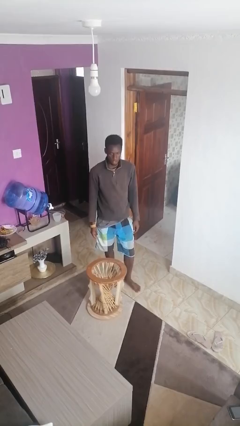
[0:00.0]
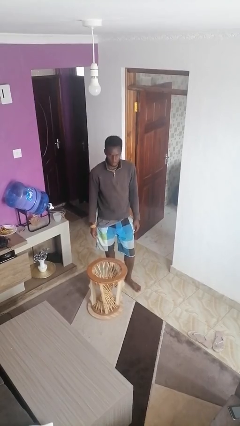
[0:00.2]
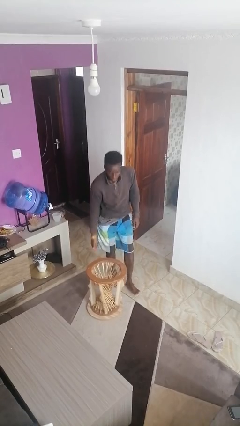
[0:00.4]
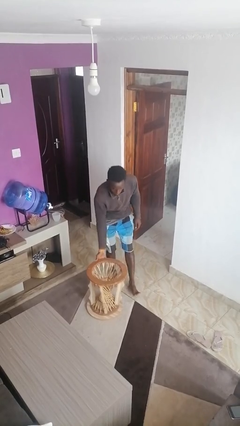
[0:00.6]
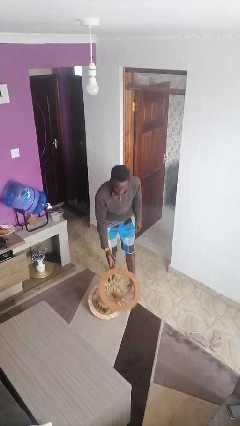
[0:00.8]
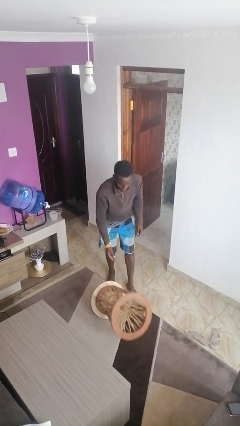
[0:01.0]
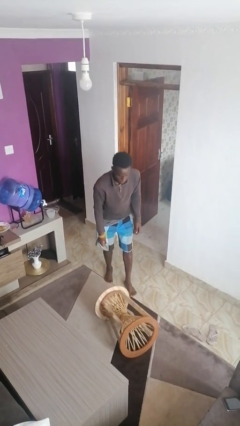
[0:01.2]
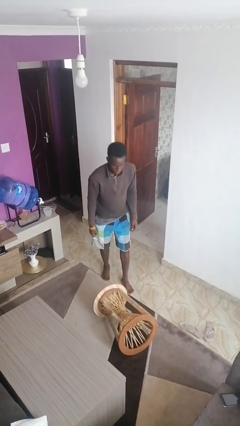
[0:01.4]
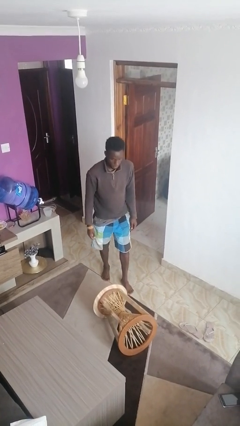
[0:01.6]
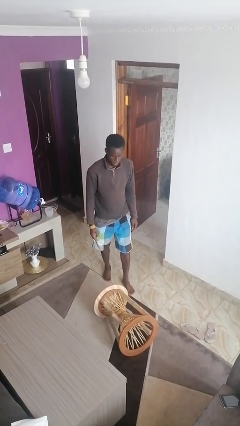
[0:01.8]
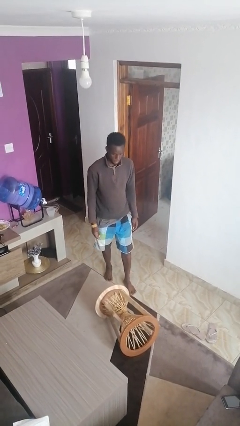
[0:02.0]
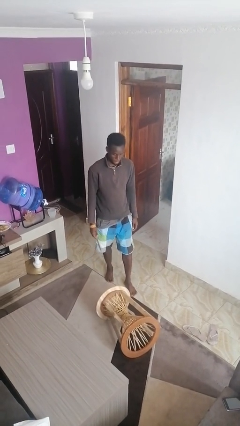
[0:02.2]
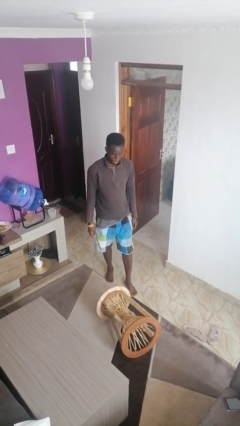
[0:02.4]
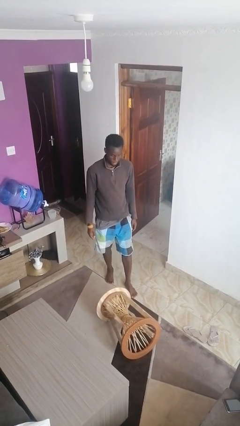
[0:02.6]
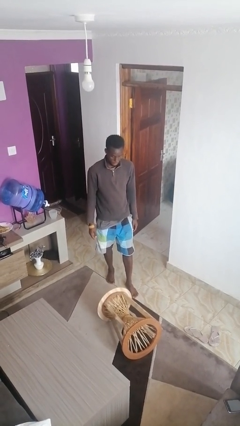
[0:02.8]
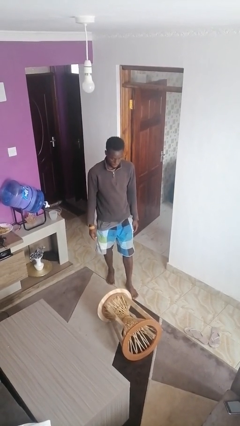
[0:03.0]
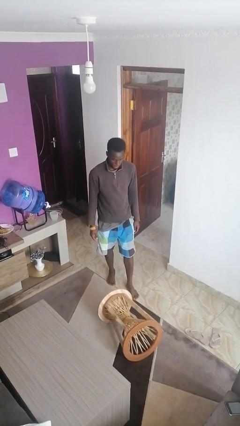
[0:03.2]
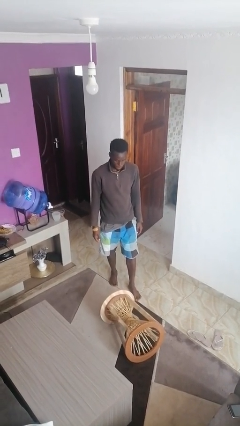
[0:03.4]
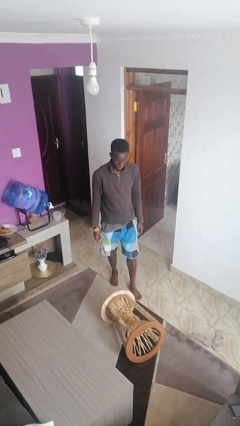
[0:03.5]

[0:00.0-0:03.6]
person knocks over furniture

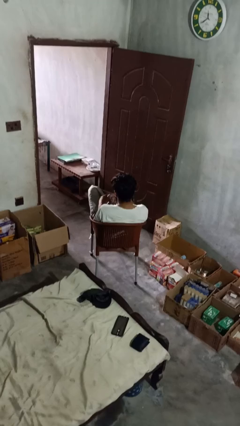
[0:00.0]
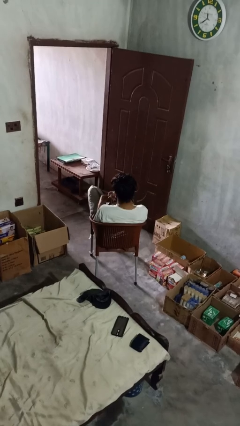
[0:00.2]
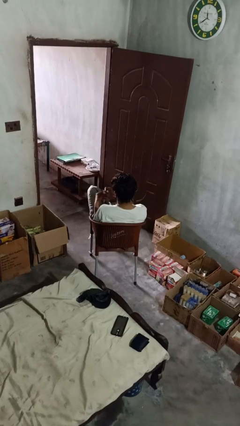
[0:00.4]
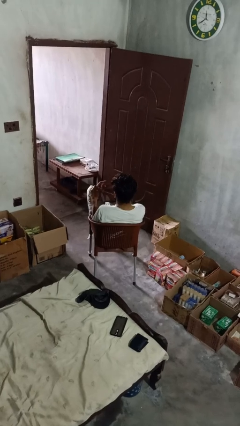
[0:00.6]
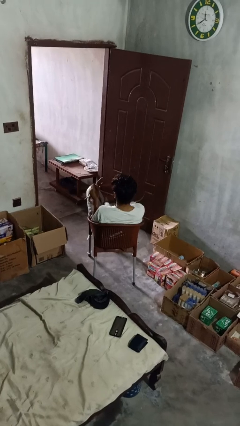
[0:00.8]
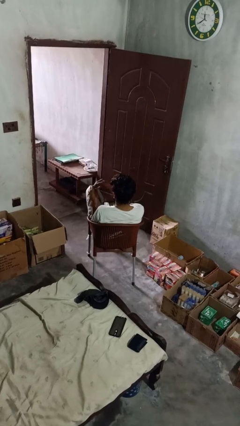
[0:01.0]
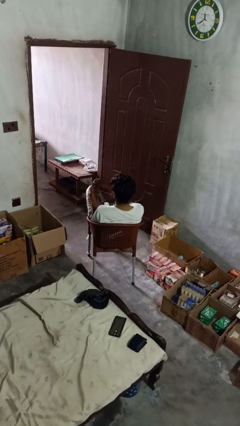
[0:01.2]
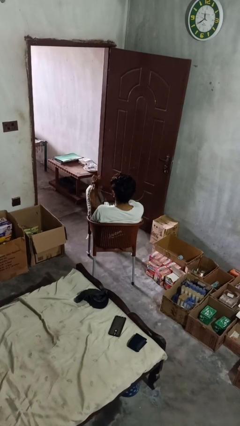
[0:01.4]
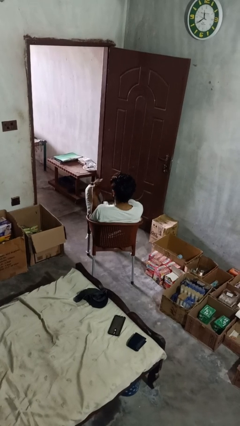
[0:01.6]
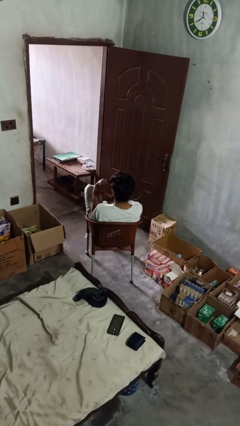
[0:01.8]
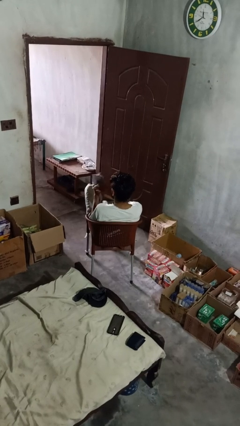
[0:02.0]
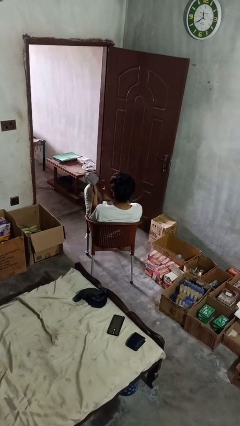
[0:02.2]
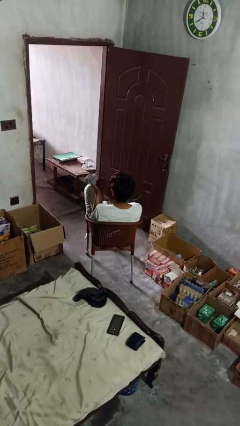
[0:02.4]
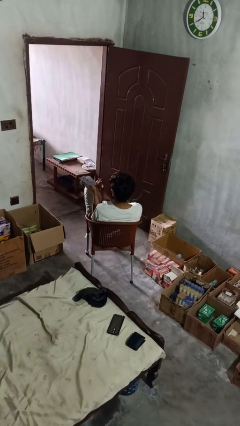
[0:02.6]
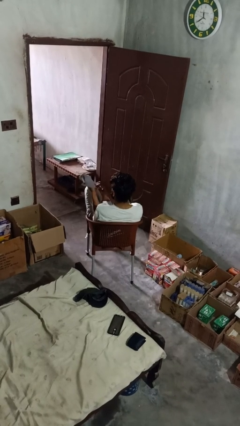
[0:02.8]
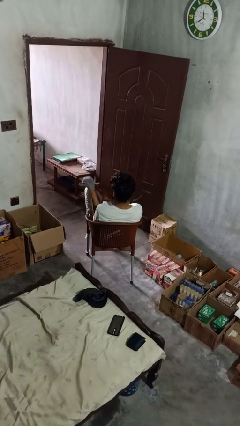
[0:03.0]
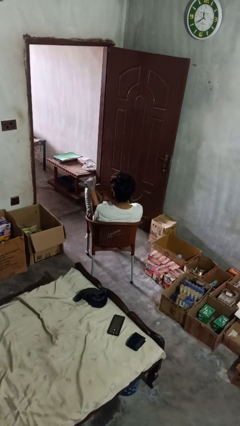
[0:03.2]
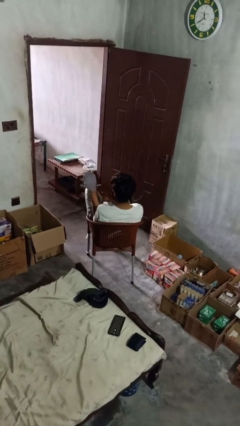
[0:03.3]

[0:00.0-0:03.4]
person puts on gloves

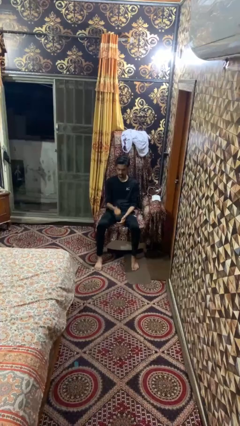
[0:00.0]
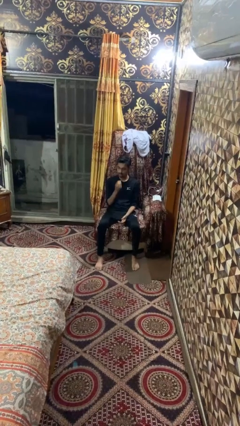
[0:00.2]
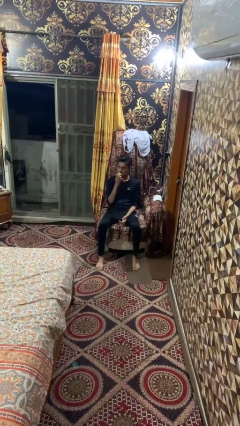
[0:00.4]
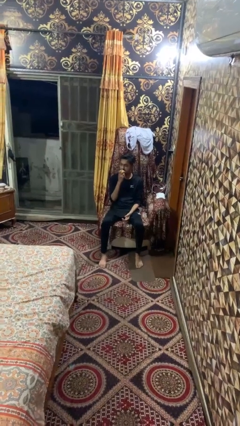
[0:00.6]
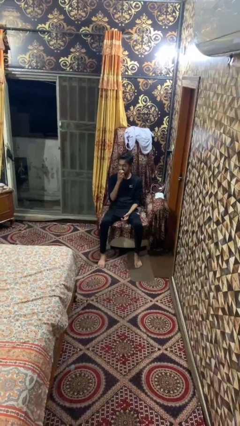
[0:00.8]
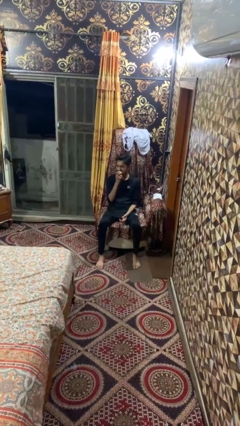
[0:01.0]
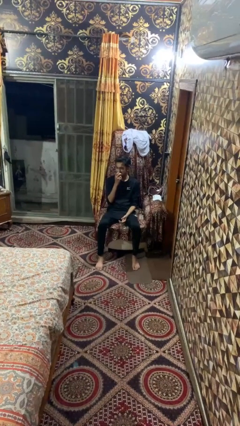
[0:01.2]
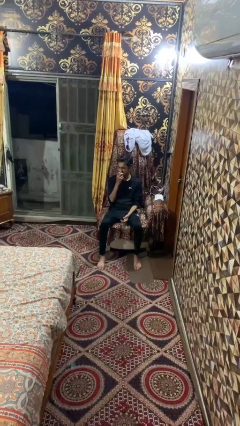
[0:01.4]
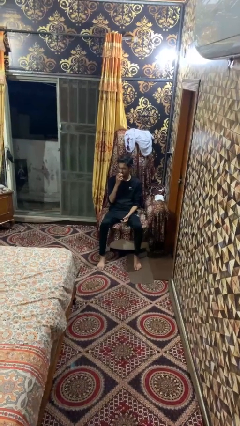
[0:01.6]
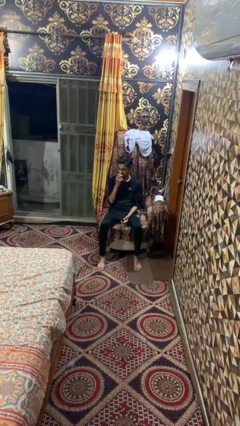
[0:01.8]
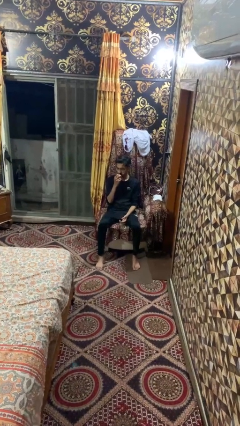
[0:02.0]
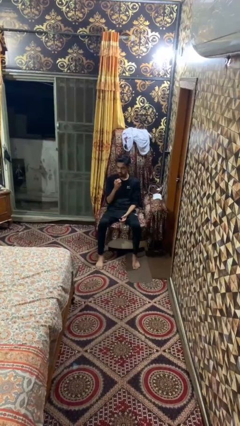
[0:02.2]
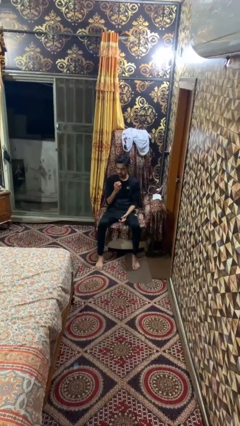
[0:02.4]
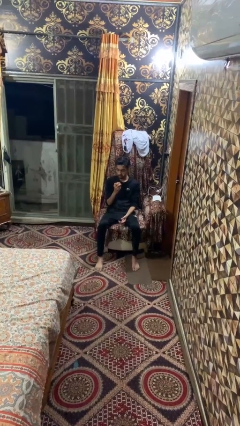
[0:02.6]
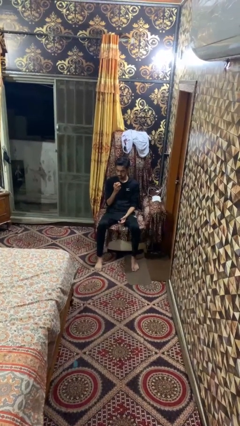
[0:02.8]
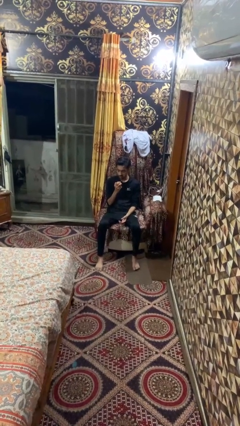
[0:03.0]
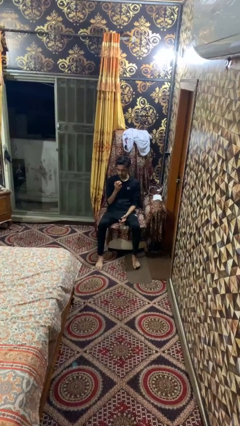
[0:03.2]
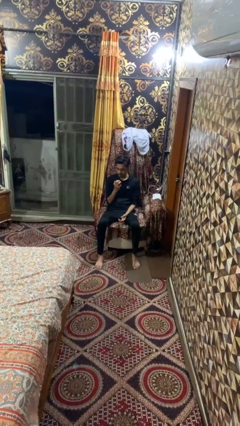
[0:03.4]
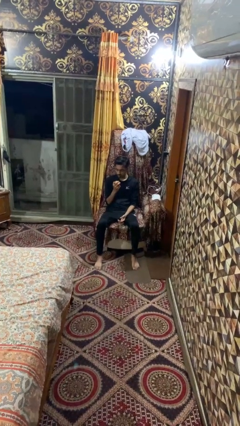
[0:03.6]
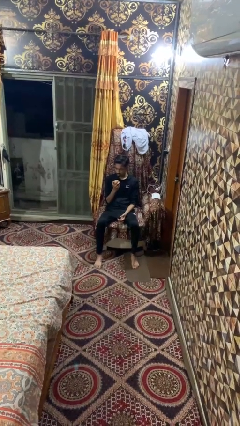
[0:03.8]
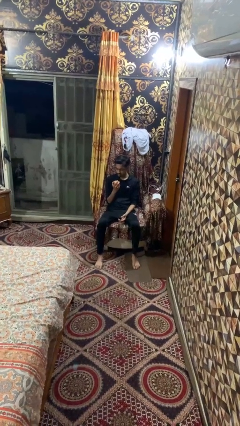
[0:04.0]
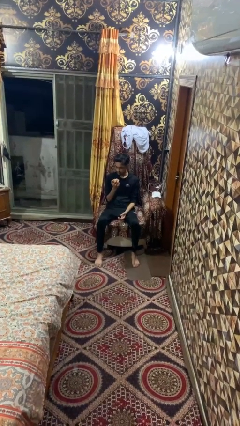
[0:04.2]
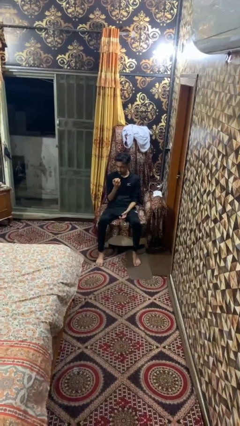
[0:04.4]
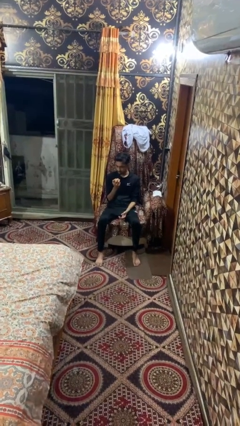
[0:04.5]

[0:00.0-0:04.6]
person eats apple

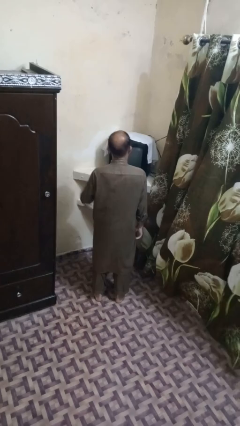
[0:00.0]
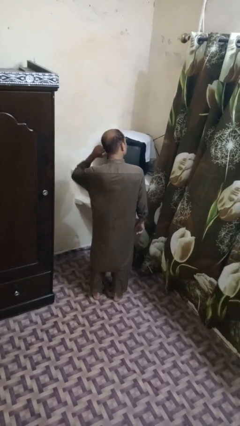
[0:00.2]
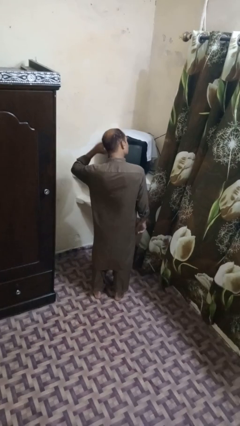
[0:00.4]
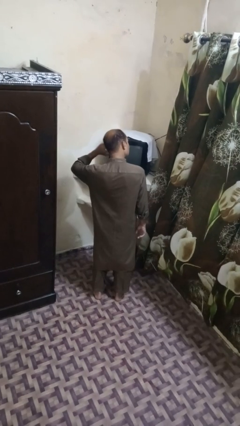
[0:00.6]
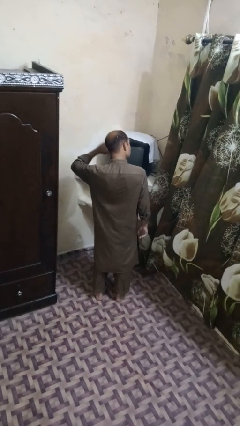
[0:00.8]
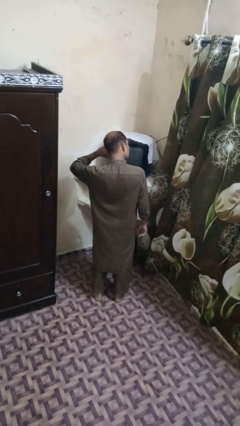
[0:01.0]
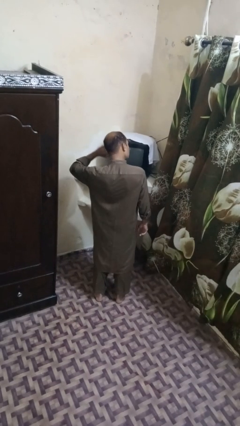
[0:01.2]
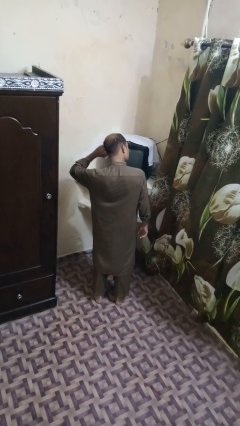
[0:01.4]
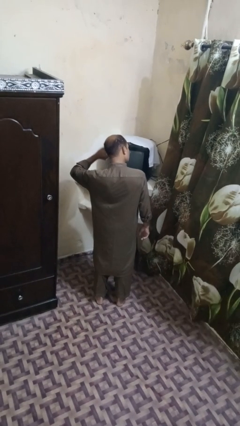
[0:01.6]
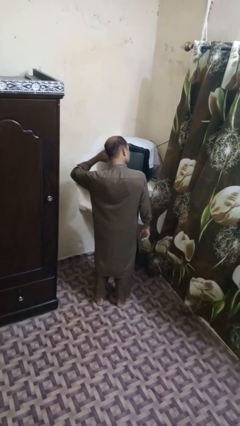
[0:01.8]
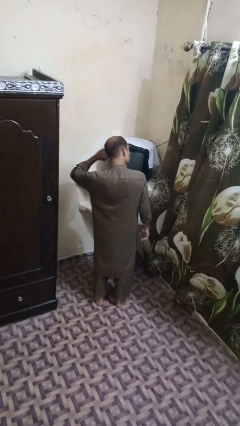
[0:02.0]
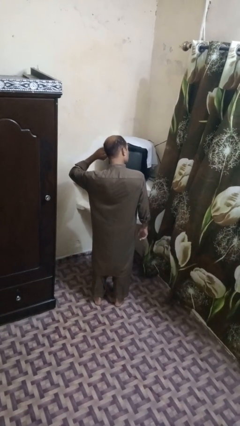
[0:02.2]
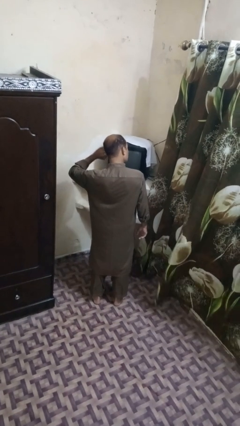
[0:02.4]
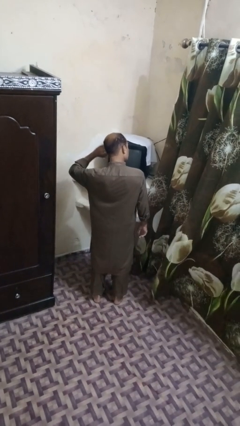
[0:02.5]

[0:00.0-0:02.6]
person puts fingers in ear

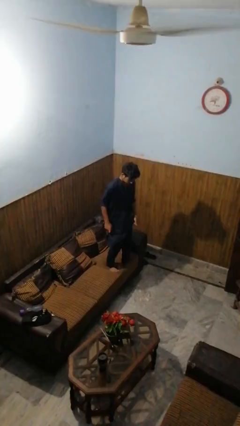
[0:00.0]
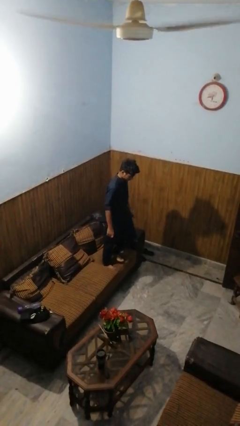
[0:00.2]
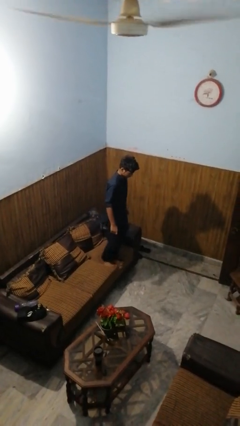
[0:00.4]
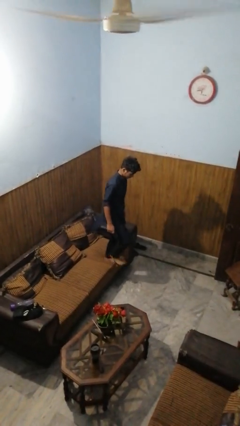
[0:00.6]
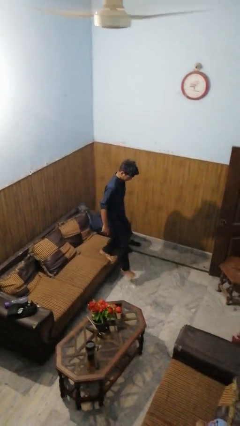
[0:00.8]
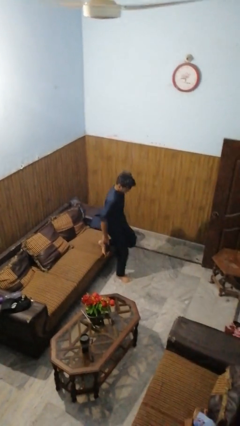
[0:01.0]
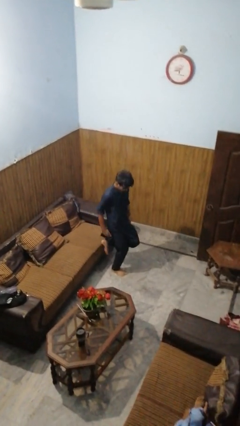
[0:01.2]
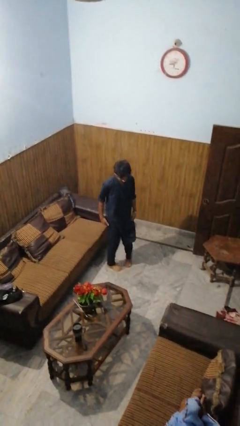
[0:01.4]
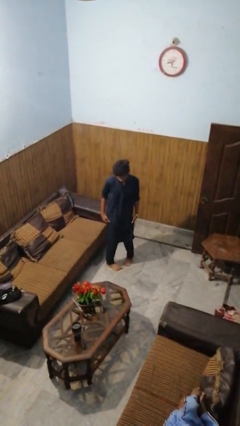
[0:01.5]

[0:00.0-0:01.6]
person climbs off couch

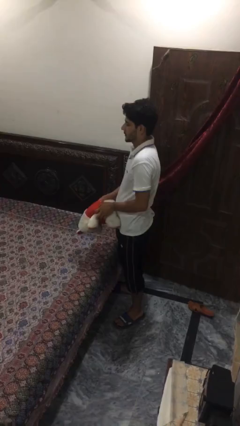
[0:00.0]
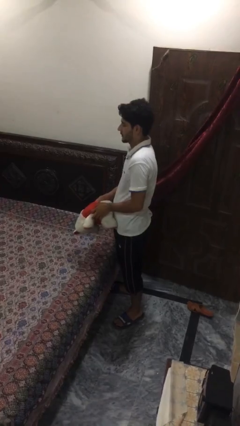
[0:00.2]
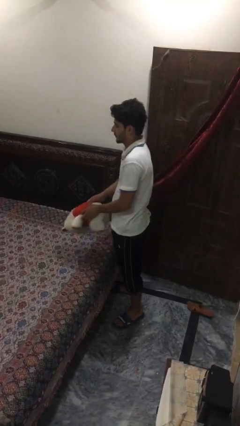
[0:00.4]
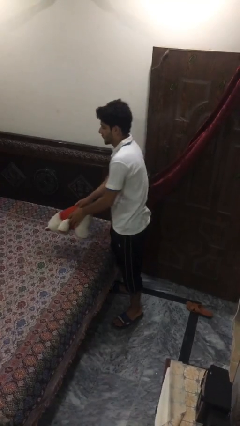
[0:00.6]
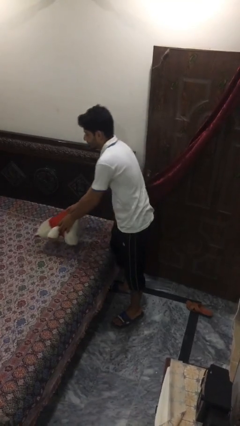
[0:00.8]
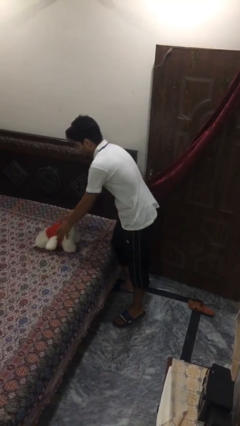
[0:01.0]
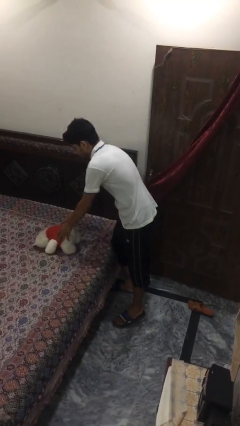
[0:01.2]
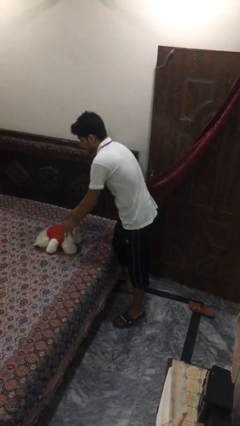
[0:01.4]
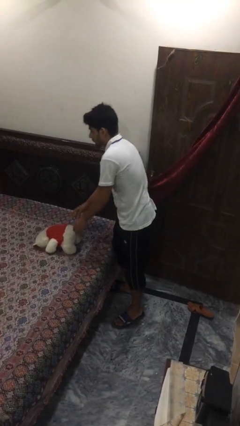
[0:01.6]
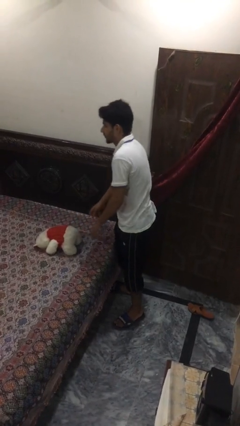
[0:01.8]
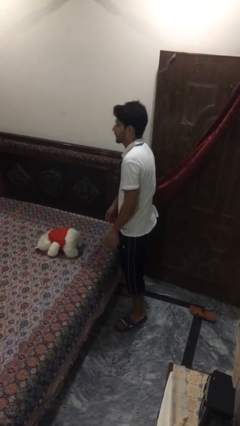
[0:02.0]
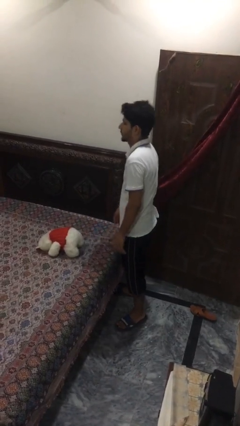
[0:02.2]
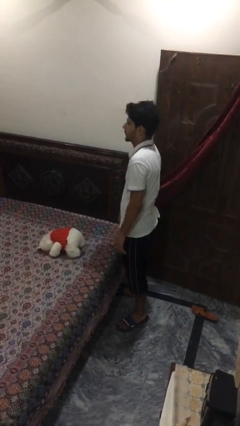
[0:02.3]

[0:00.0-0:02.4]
person puts down object on bed
